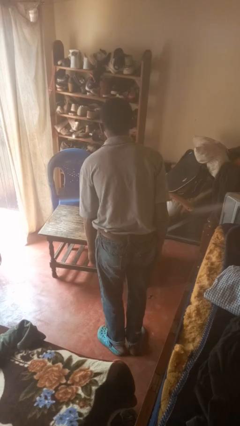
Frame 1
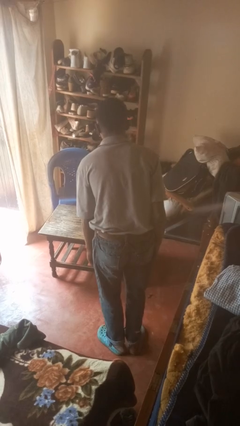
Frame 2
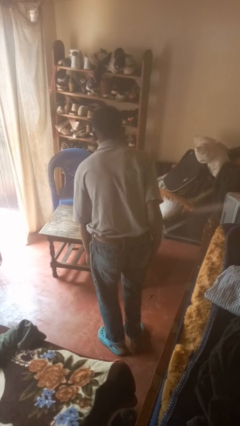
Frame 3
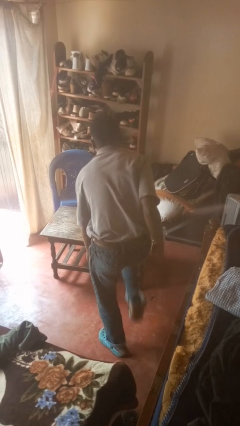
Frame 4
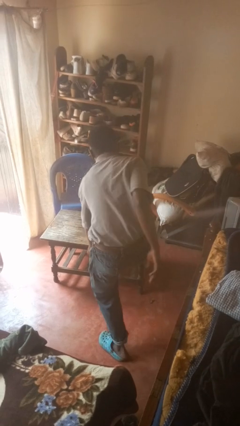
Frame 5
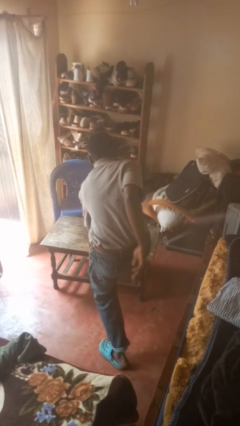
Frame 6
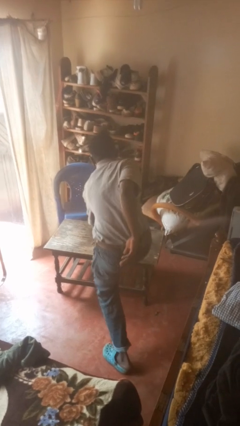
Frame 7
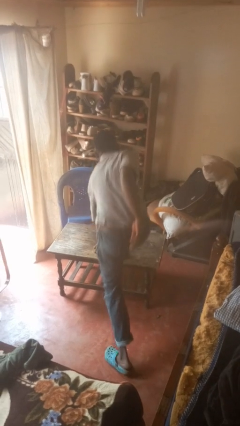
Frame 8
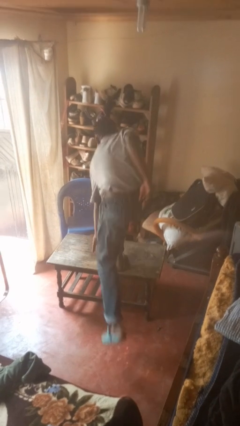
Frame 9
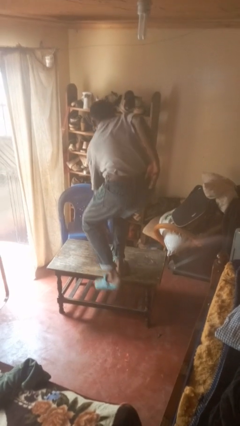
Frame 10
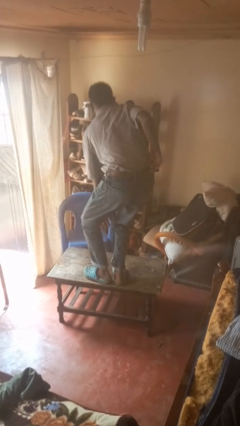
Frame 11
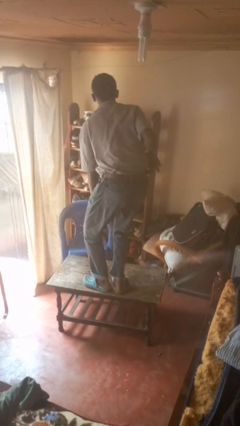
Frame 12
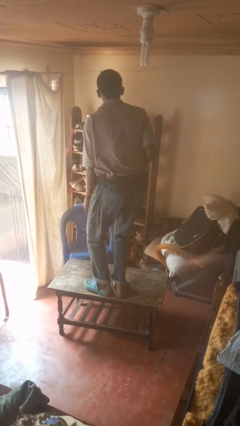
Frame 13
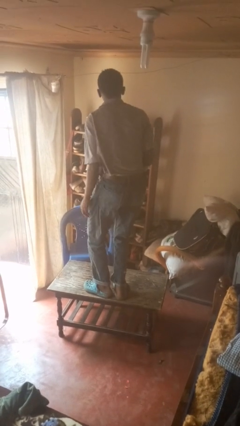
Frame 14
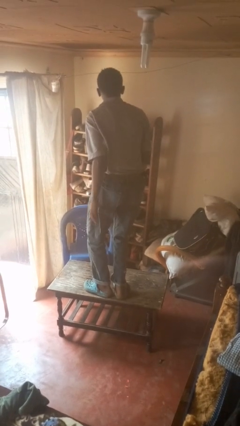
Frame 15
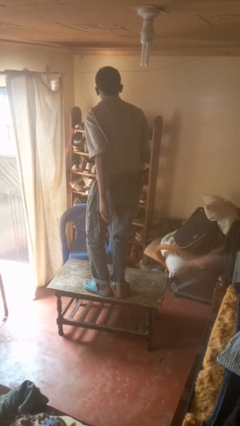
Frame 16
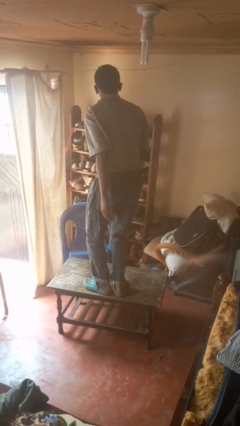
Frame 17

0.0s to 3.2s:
person climbs on table

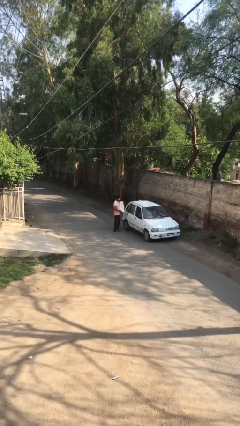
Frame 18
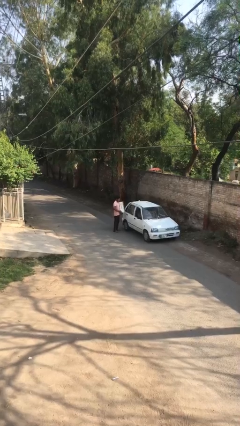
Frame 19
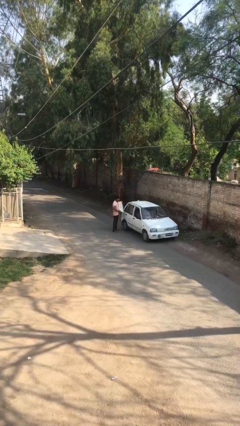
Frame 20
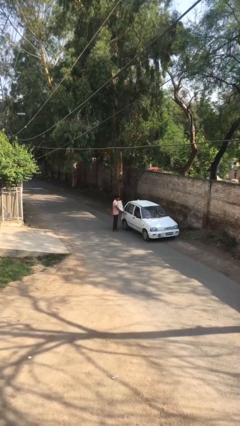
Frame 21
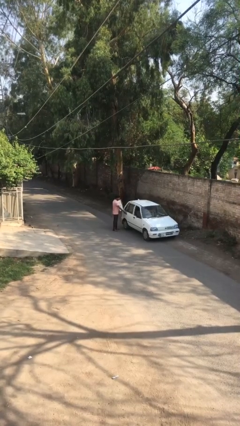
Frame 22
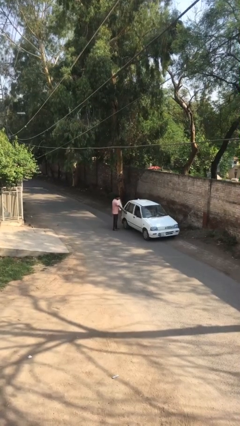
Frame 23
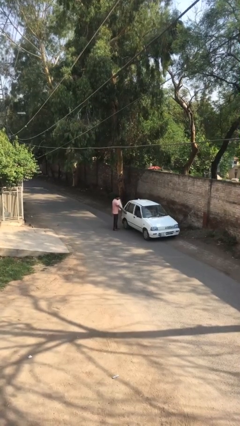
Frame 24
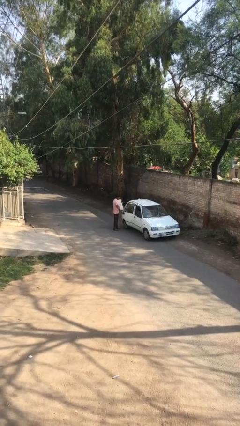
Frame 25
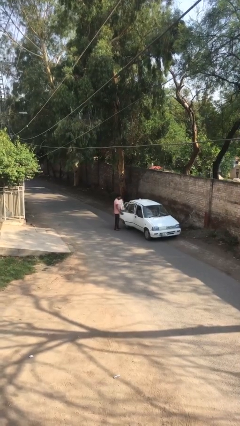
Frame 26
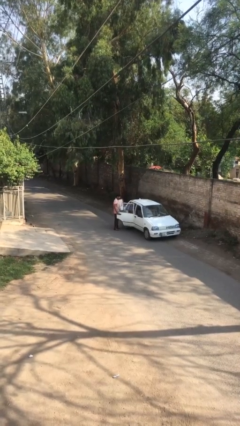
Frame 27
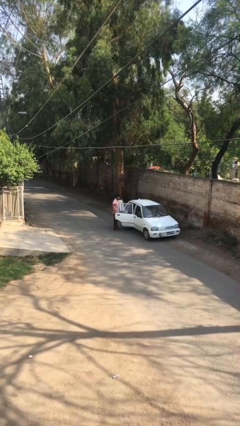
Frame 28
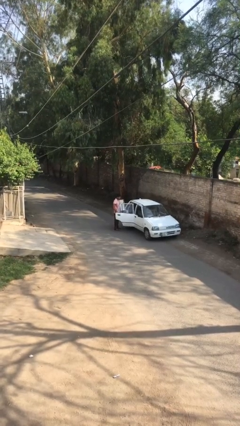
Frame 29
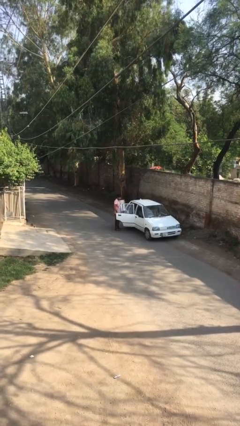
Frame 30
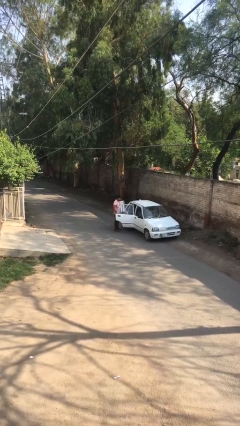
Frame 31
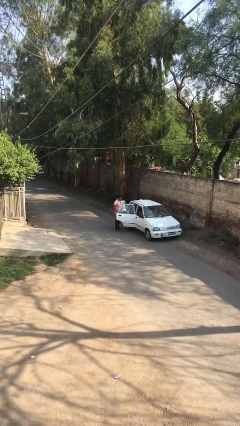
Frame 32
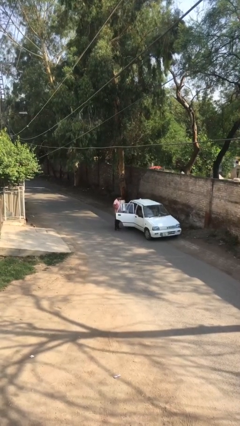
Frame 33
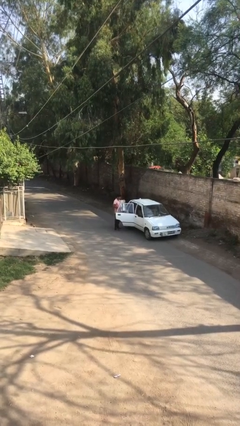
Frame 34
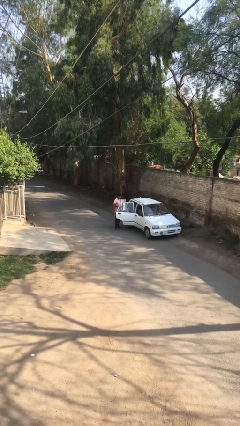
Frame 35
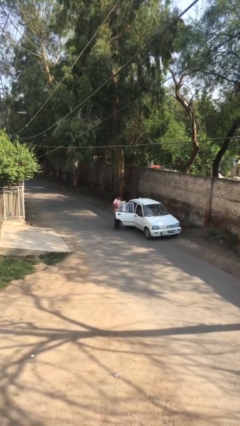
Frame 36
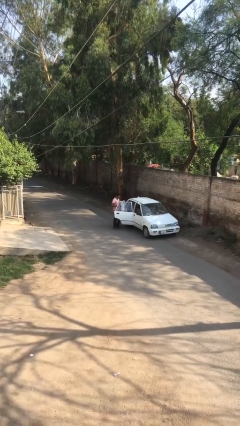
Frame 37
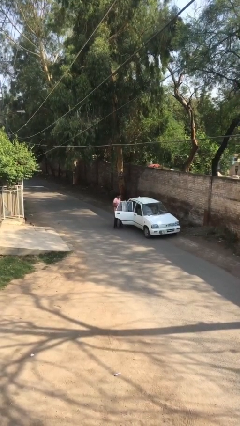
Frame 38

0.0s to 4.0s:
person opens car door

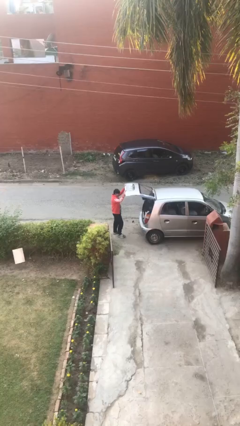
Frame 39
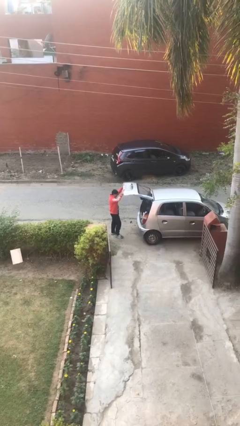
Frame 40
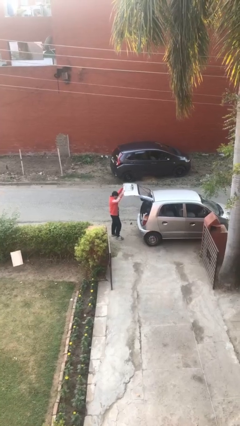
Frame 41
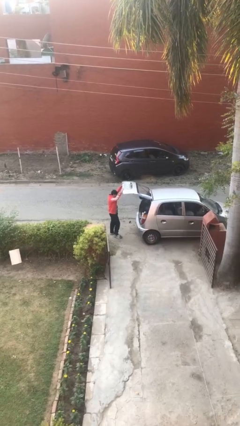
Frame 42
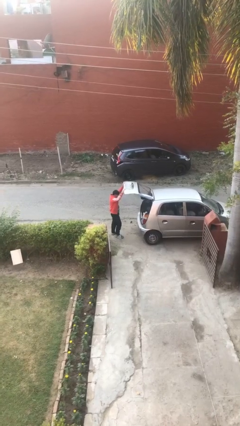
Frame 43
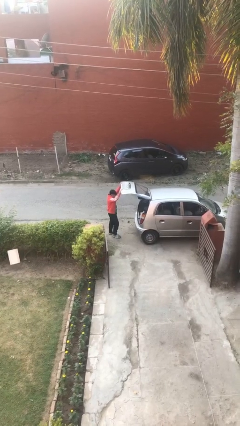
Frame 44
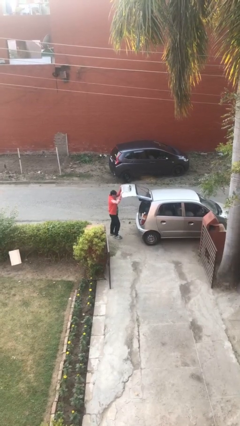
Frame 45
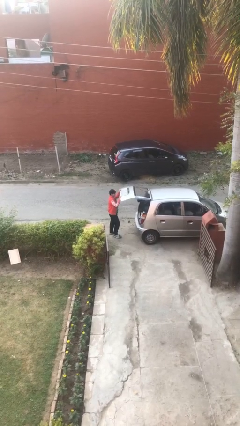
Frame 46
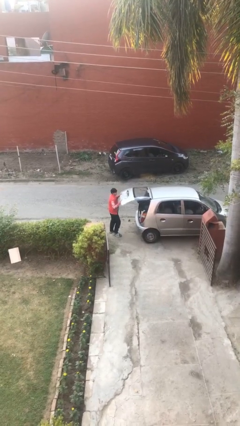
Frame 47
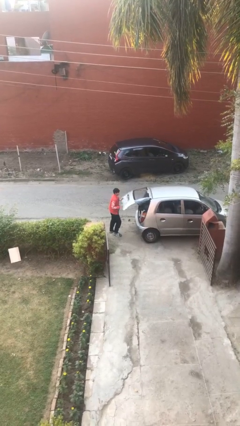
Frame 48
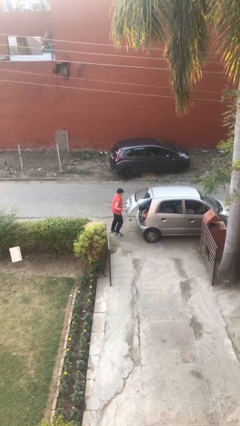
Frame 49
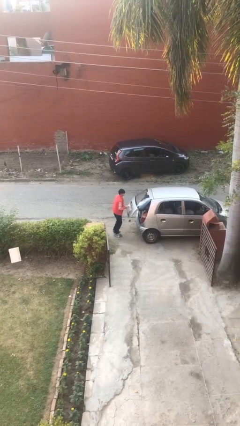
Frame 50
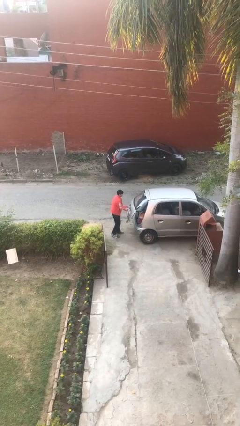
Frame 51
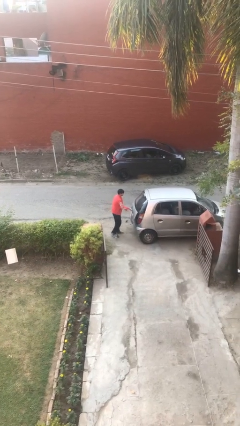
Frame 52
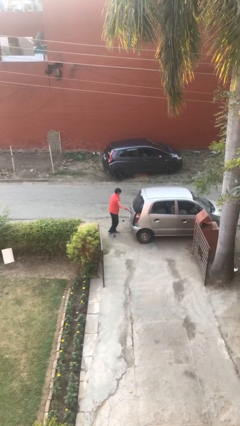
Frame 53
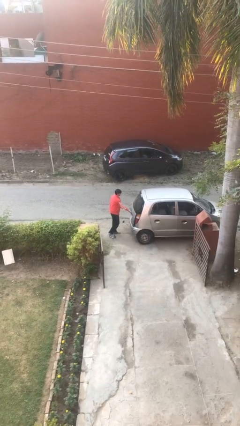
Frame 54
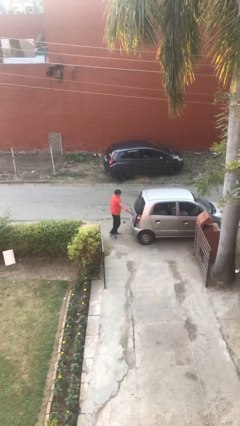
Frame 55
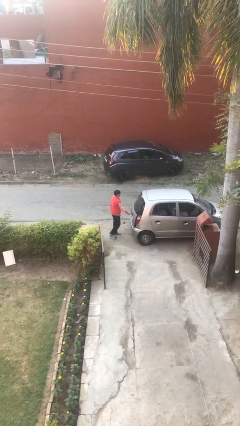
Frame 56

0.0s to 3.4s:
person closes car trunk

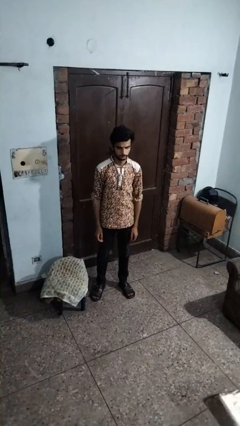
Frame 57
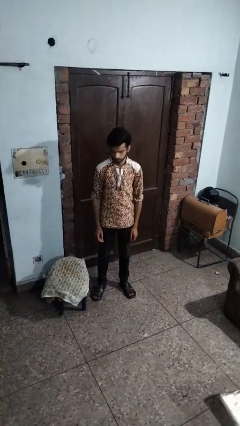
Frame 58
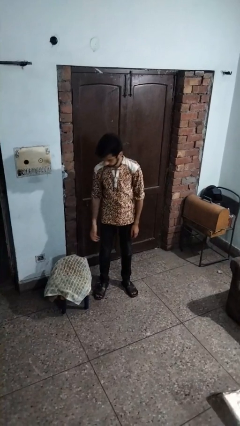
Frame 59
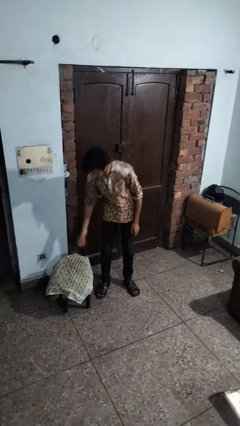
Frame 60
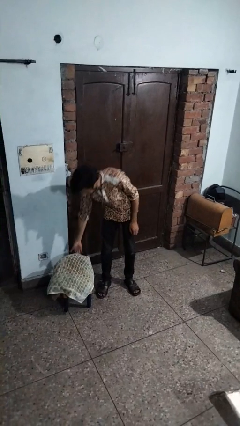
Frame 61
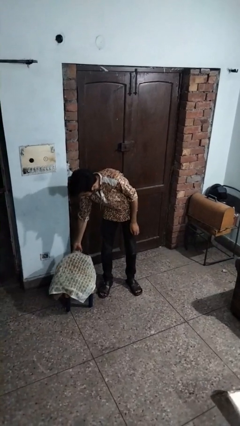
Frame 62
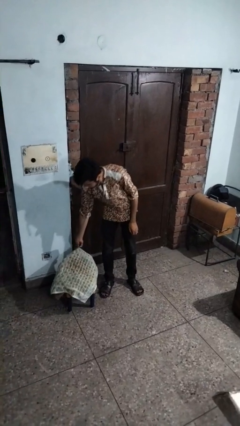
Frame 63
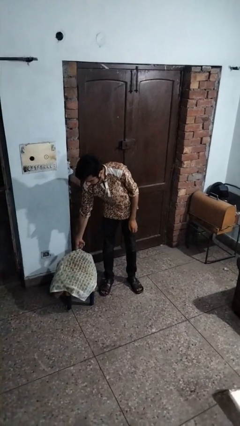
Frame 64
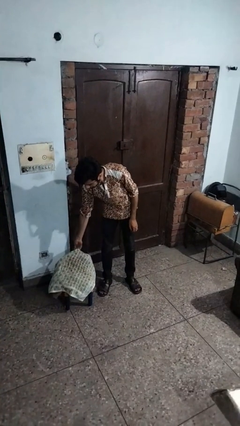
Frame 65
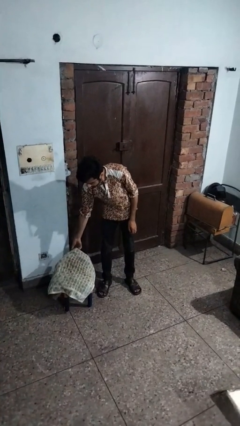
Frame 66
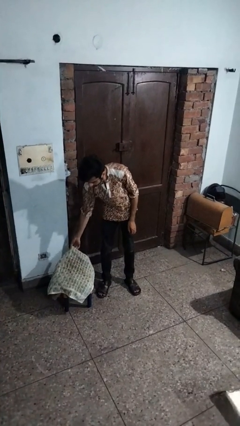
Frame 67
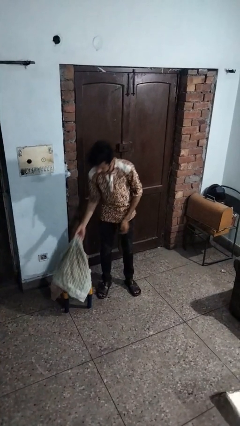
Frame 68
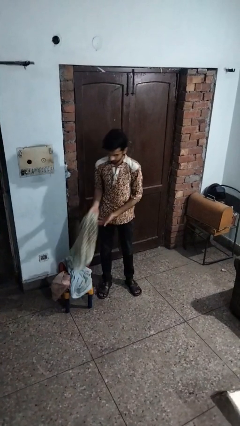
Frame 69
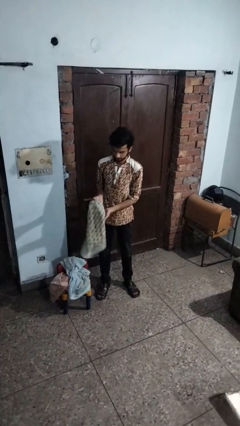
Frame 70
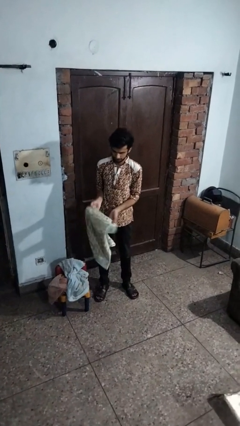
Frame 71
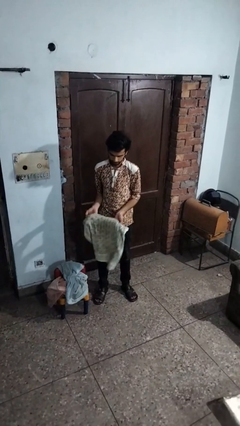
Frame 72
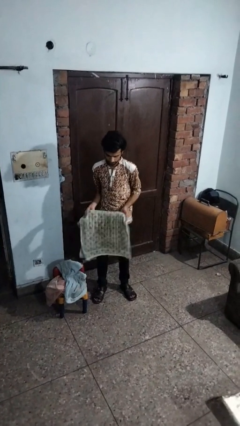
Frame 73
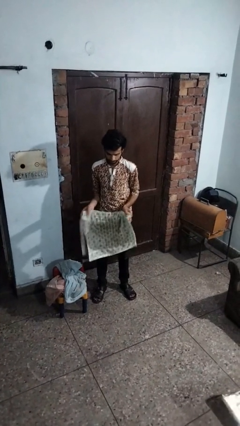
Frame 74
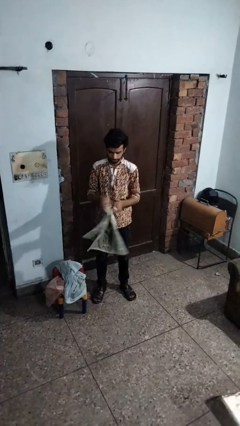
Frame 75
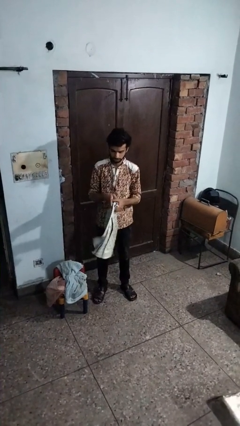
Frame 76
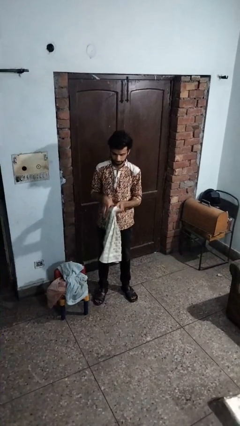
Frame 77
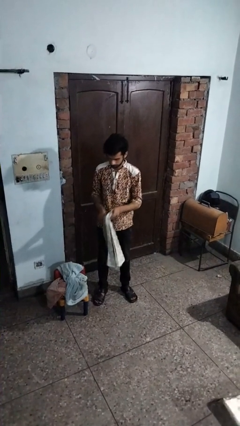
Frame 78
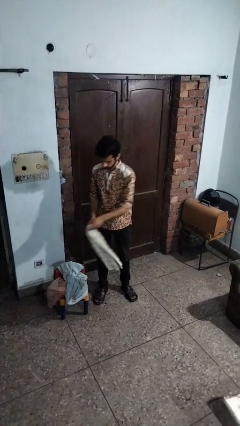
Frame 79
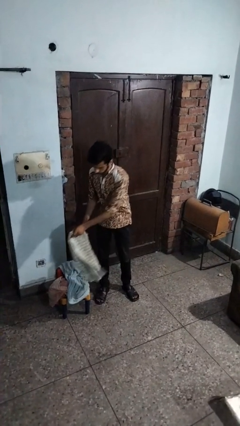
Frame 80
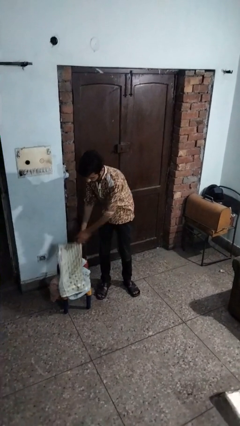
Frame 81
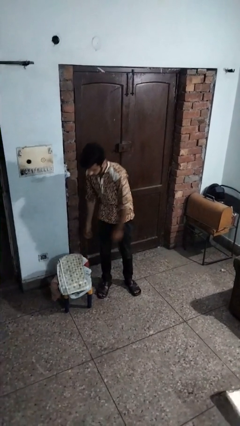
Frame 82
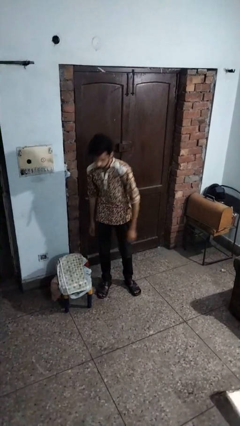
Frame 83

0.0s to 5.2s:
person folds towel

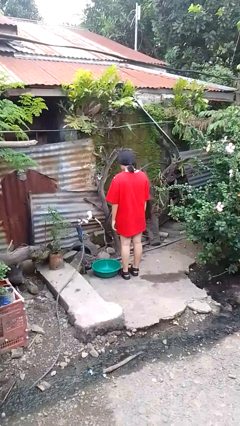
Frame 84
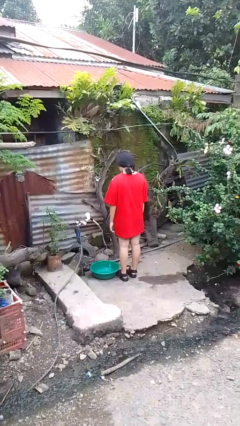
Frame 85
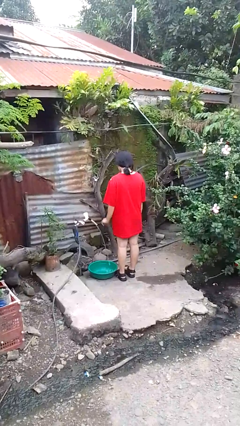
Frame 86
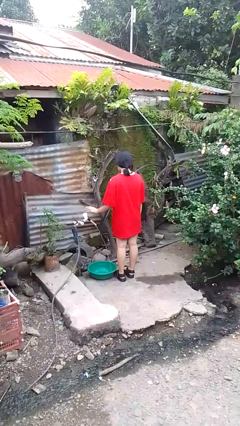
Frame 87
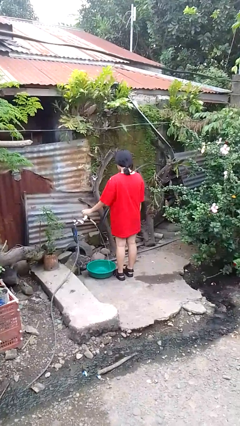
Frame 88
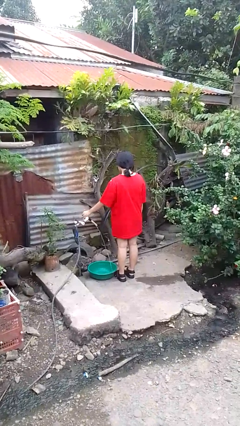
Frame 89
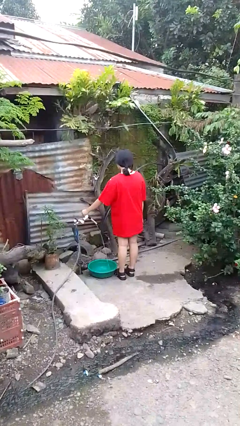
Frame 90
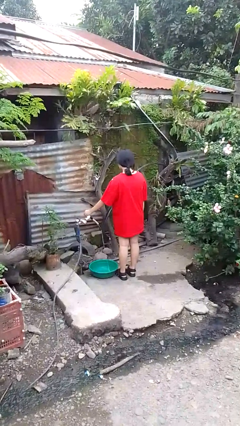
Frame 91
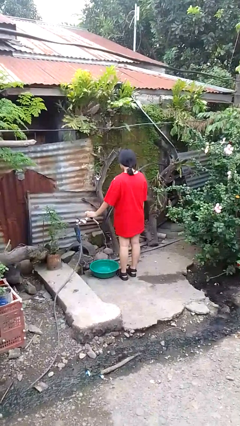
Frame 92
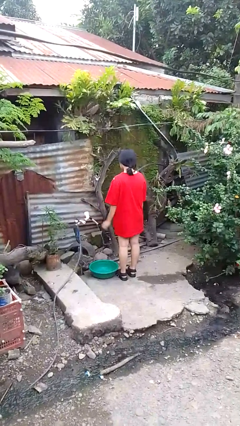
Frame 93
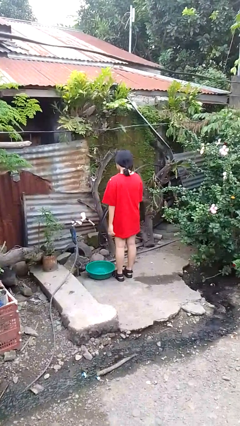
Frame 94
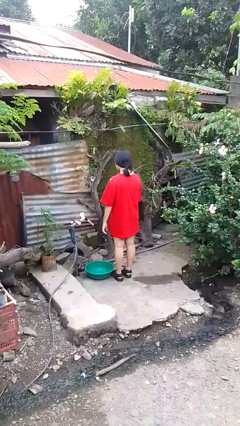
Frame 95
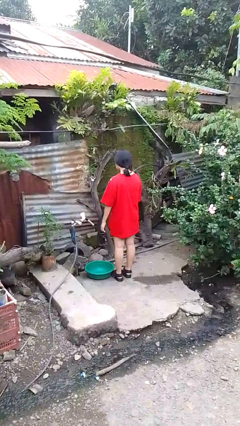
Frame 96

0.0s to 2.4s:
person turns off faucet
